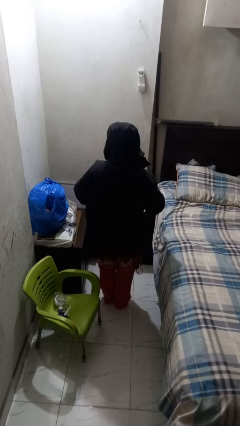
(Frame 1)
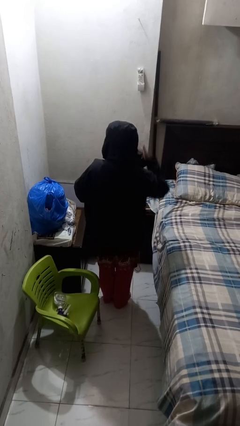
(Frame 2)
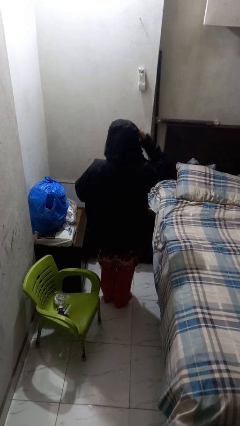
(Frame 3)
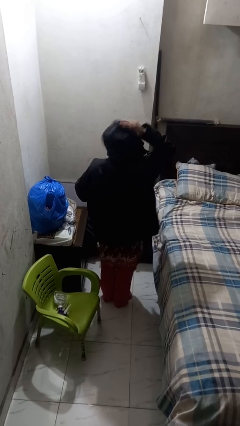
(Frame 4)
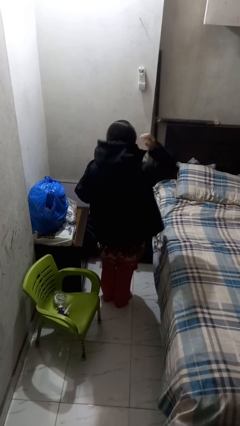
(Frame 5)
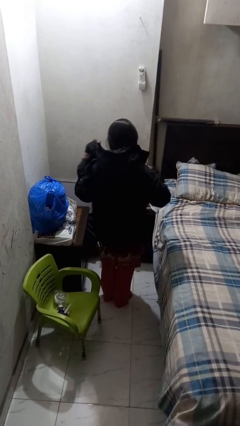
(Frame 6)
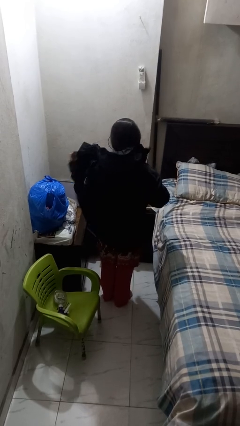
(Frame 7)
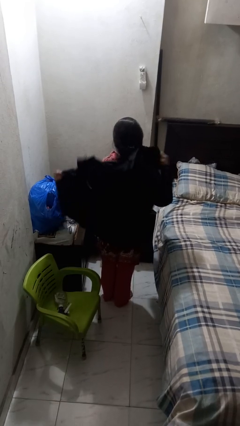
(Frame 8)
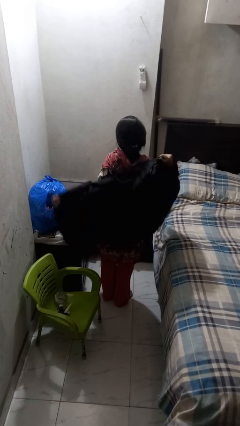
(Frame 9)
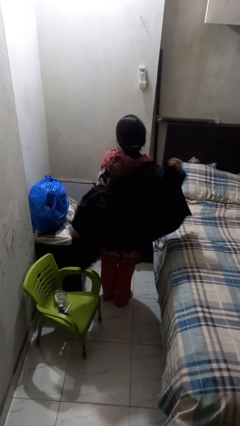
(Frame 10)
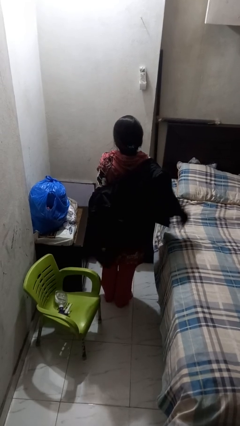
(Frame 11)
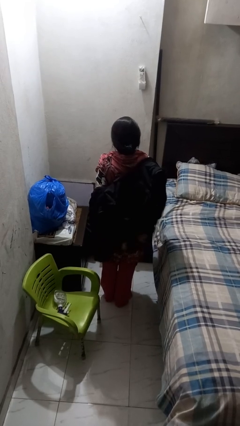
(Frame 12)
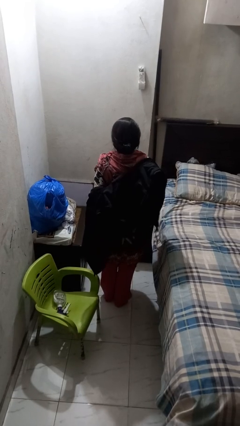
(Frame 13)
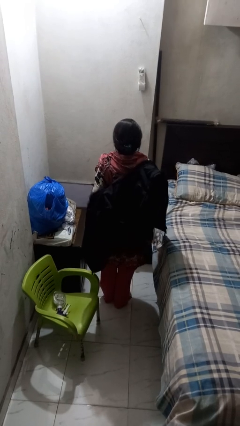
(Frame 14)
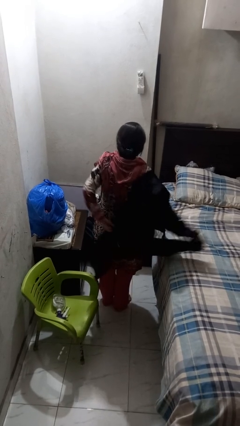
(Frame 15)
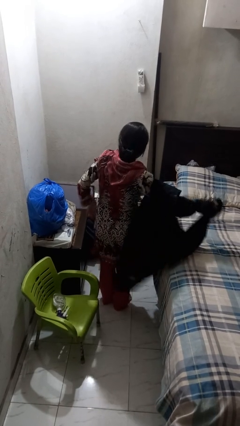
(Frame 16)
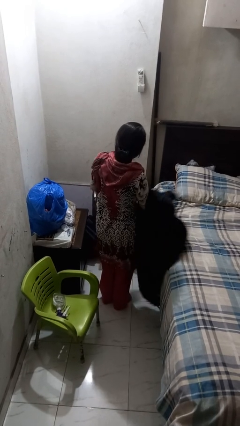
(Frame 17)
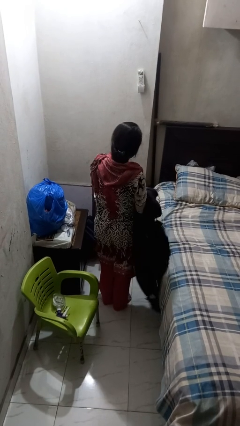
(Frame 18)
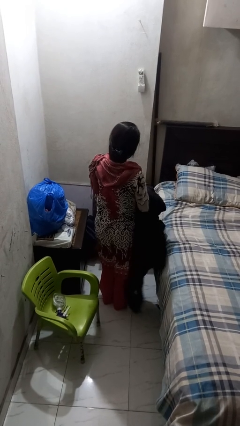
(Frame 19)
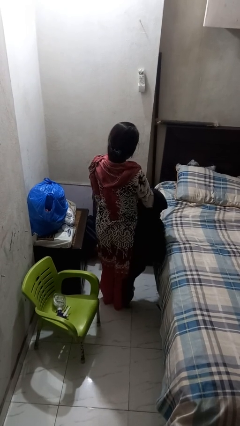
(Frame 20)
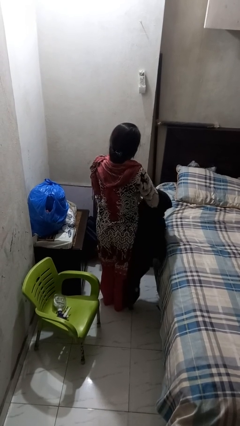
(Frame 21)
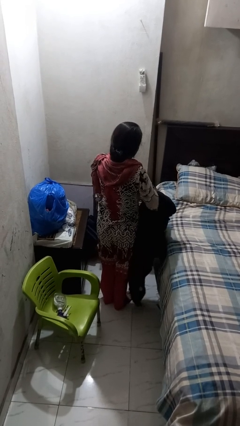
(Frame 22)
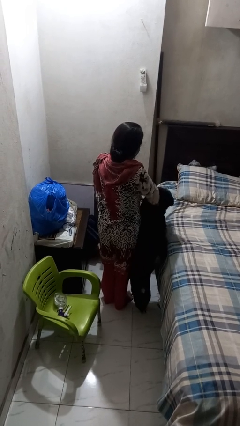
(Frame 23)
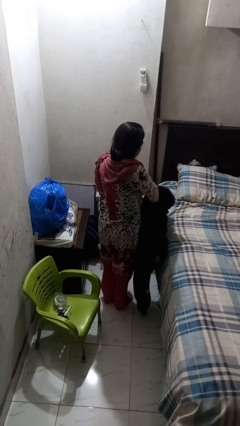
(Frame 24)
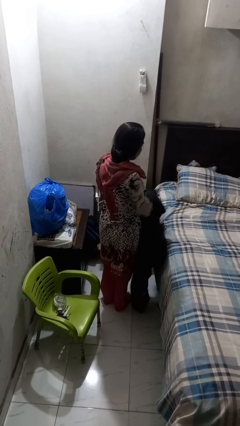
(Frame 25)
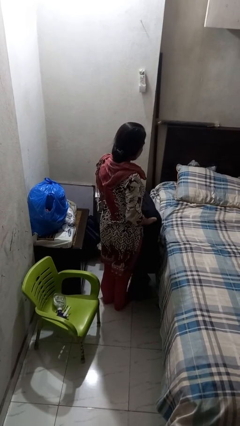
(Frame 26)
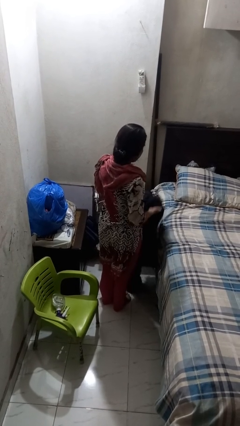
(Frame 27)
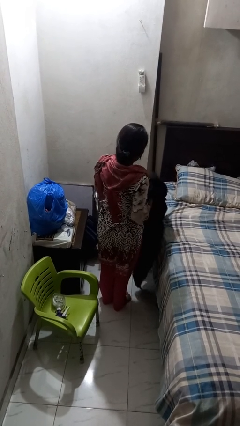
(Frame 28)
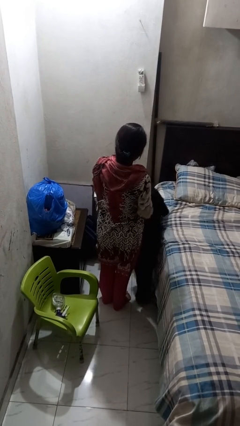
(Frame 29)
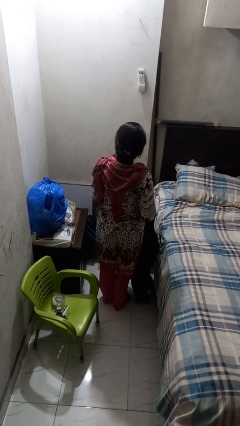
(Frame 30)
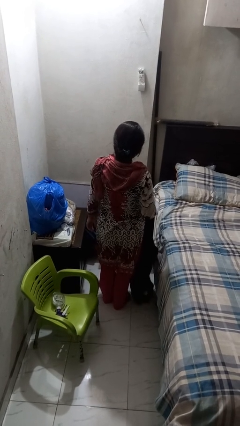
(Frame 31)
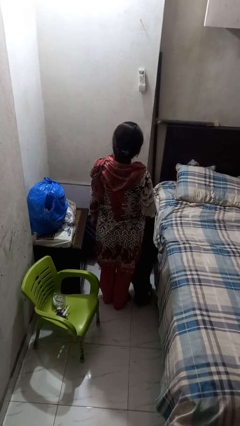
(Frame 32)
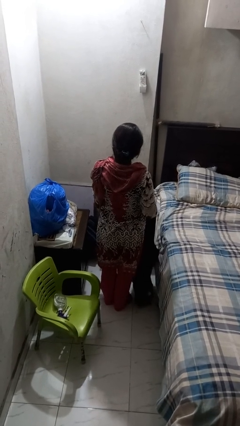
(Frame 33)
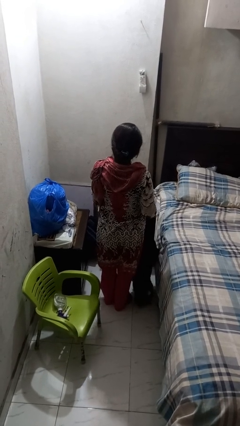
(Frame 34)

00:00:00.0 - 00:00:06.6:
person takes off hoodie

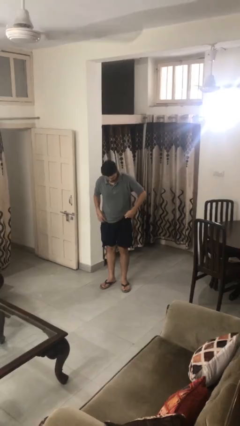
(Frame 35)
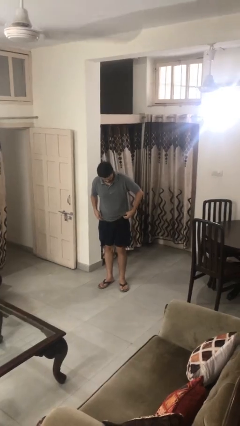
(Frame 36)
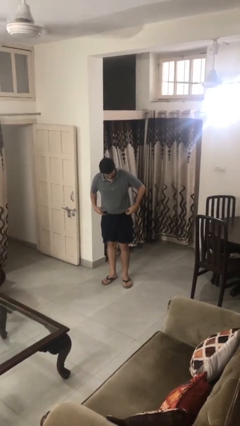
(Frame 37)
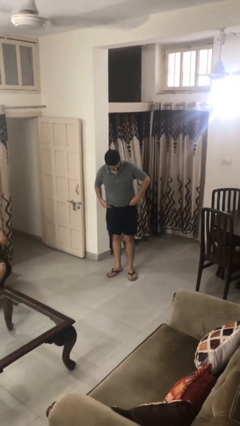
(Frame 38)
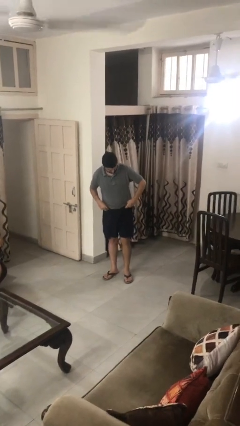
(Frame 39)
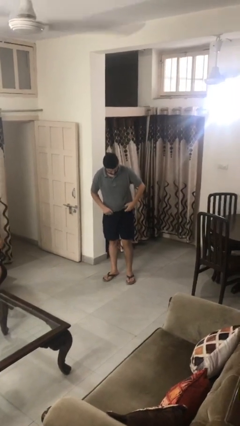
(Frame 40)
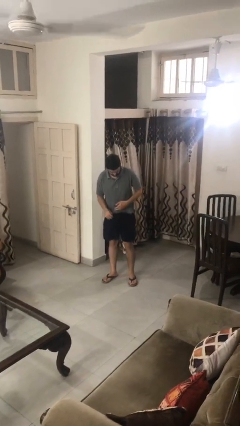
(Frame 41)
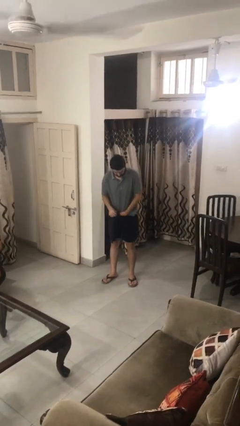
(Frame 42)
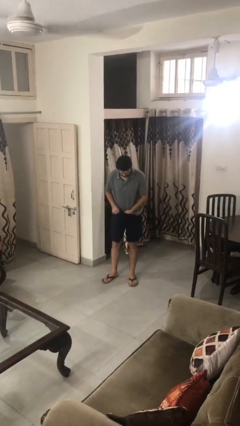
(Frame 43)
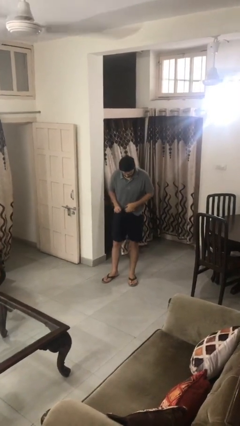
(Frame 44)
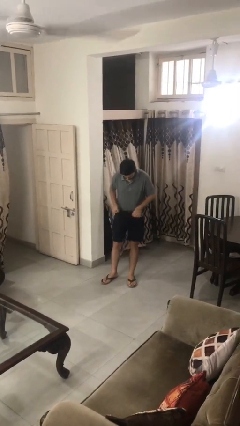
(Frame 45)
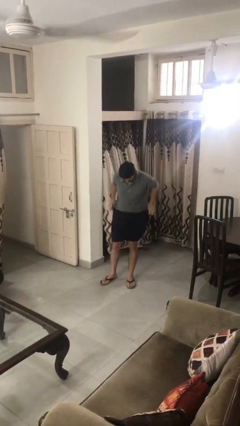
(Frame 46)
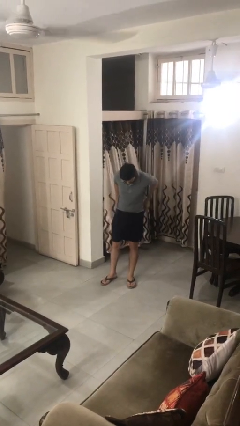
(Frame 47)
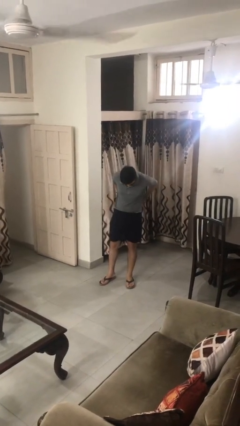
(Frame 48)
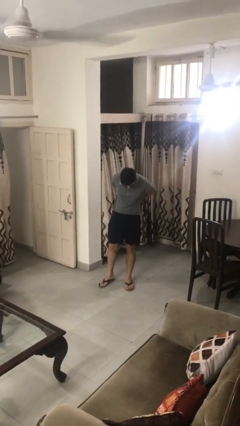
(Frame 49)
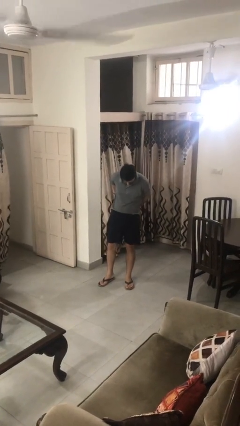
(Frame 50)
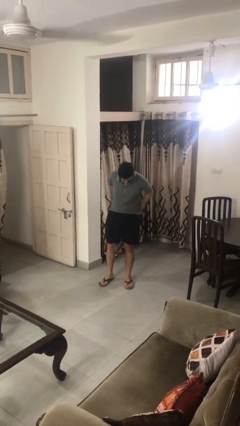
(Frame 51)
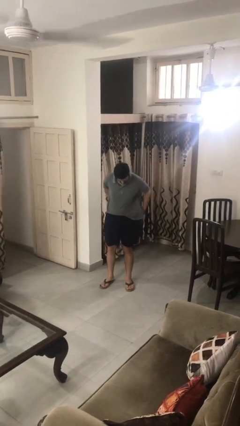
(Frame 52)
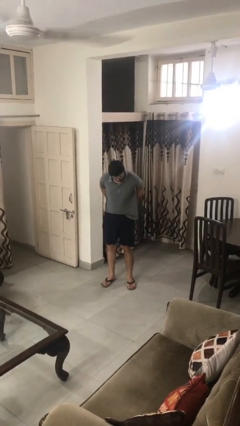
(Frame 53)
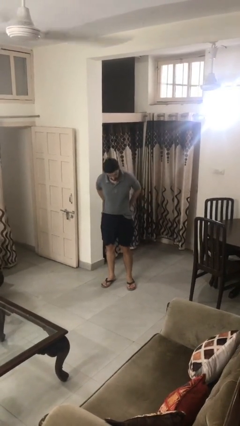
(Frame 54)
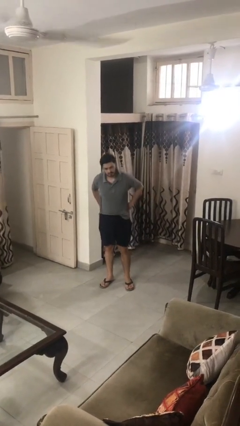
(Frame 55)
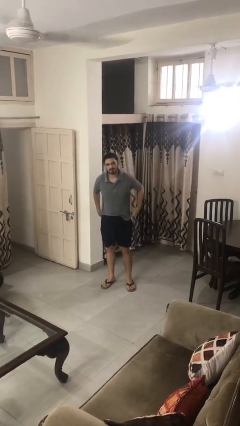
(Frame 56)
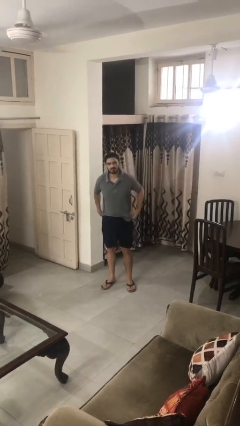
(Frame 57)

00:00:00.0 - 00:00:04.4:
person tucks in shirt

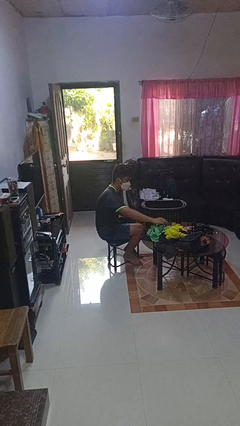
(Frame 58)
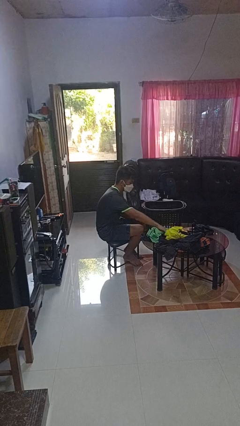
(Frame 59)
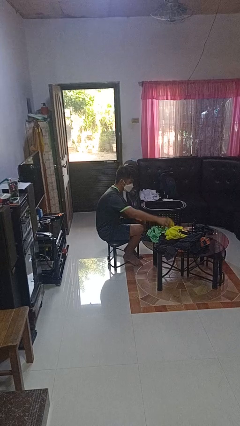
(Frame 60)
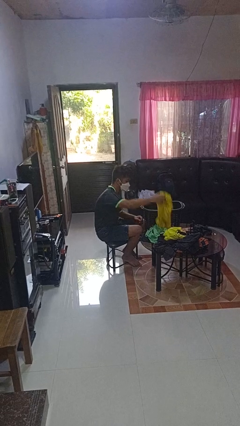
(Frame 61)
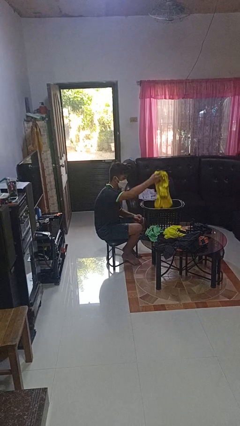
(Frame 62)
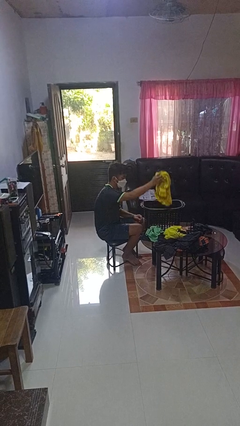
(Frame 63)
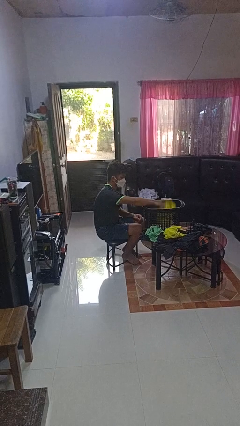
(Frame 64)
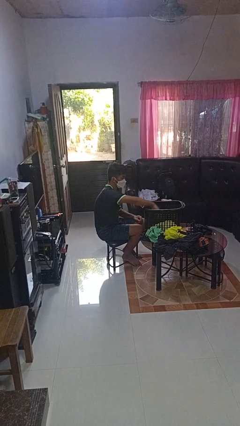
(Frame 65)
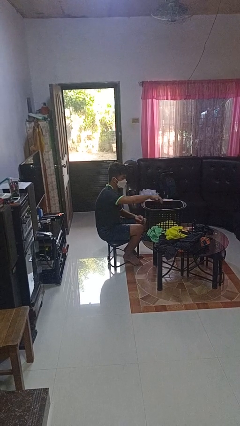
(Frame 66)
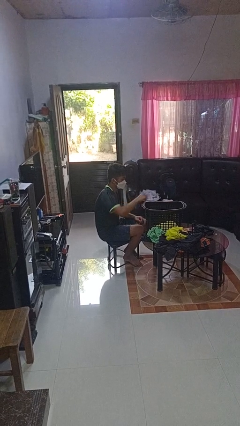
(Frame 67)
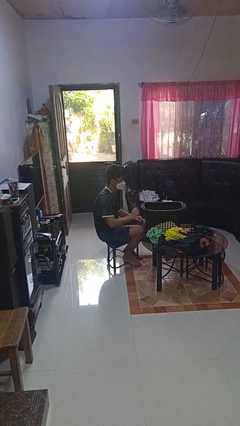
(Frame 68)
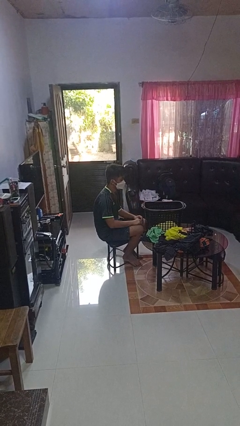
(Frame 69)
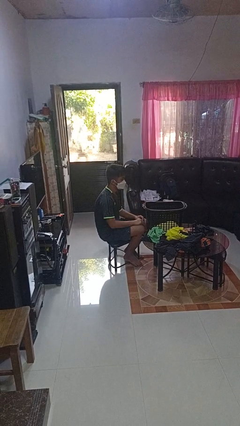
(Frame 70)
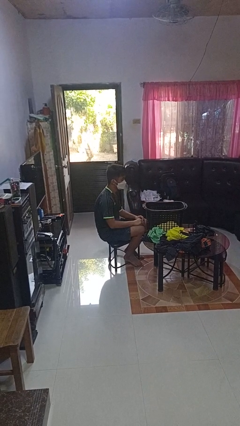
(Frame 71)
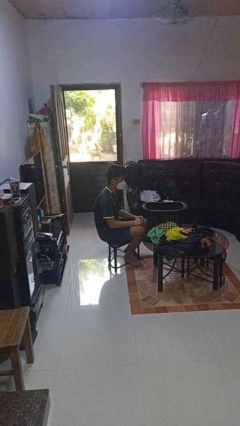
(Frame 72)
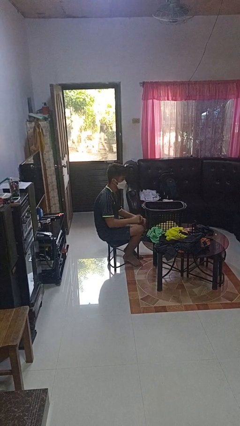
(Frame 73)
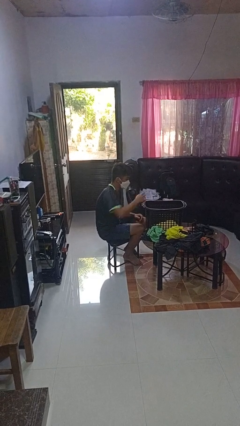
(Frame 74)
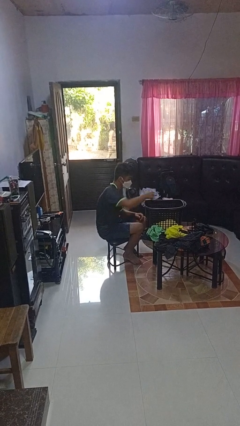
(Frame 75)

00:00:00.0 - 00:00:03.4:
person puts object into basket

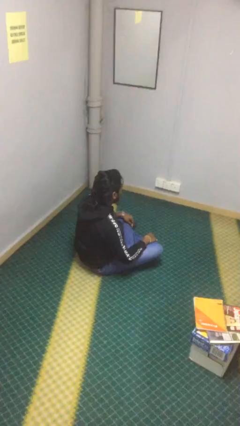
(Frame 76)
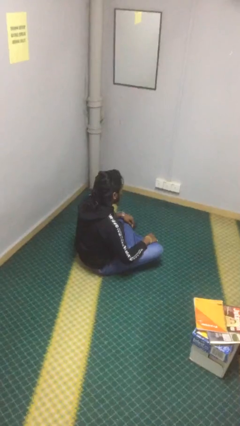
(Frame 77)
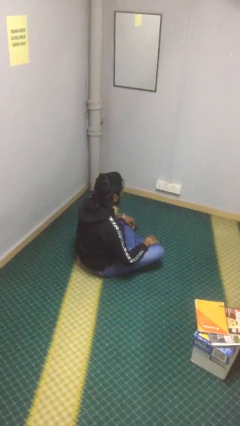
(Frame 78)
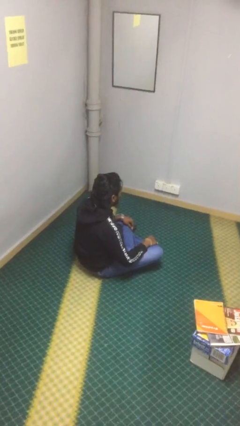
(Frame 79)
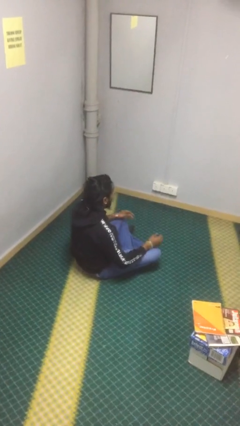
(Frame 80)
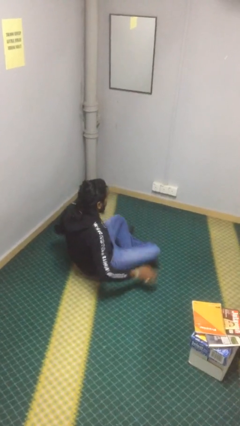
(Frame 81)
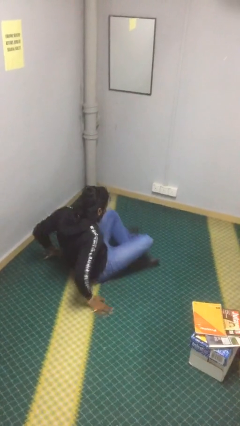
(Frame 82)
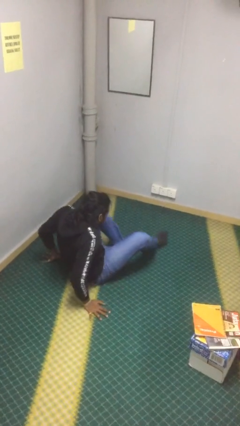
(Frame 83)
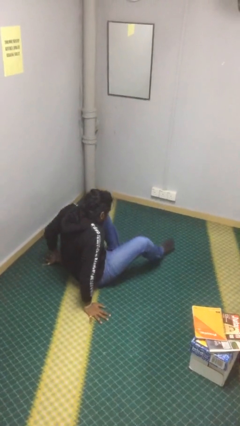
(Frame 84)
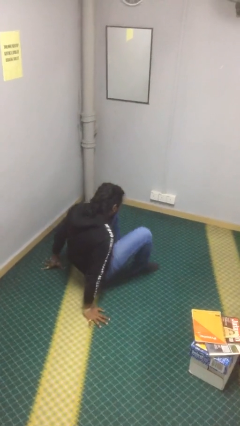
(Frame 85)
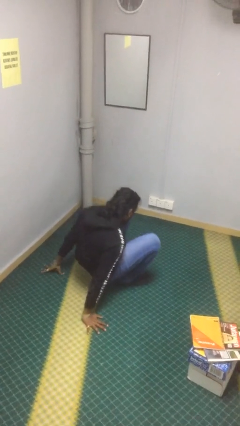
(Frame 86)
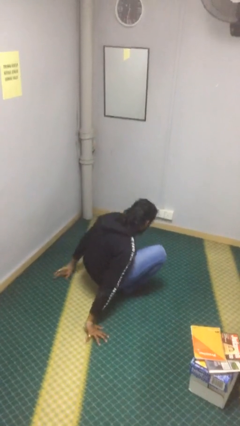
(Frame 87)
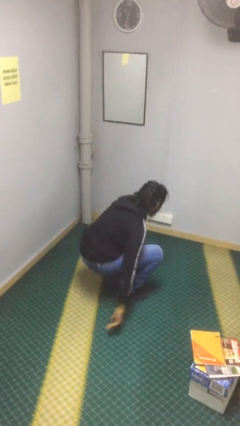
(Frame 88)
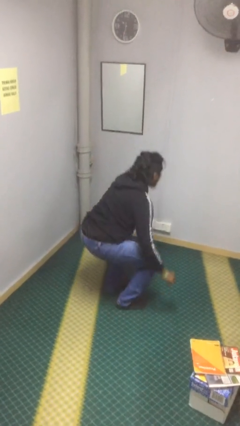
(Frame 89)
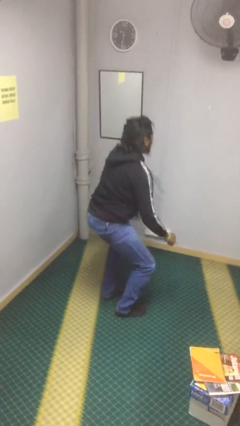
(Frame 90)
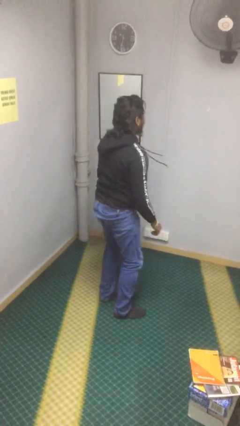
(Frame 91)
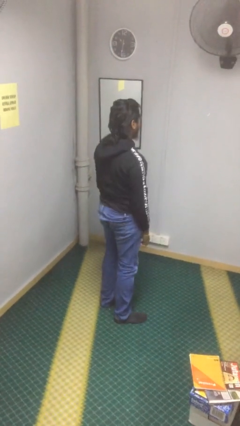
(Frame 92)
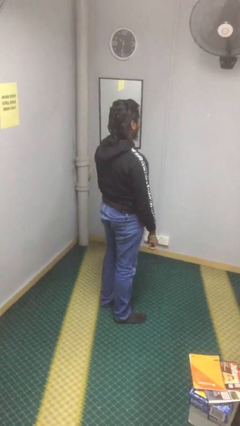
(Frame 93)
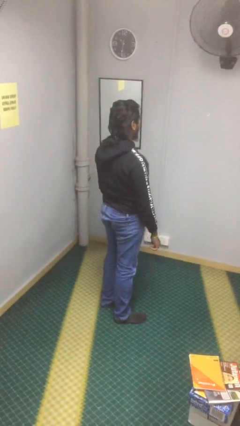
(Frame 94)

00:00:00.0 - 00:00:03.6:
person stands up from floor
